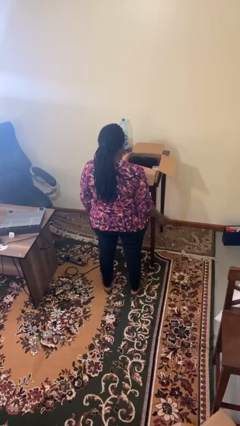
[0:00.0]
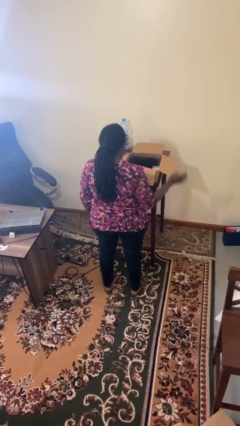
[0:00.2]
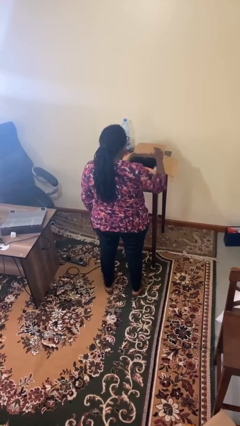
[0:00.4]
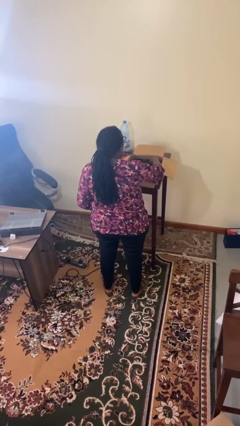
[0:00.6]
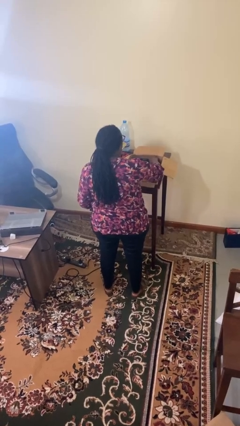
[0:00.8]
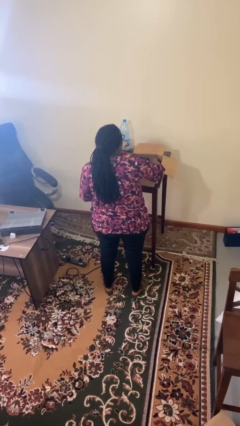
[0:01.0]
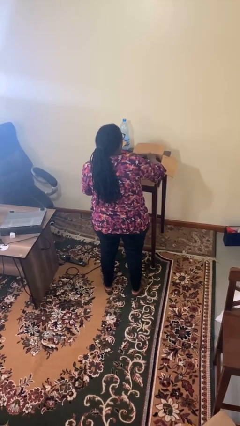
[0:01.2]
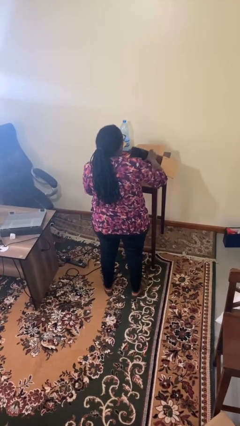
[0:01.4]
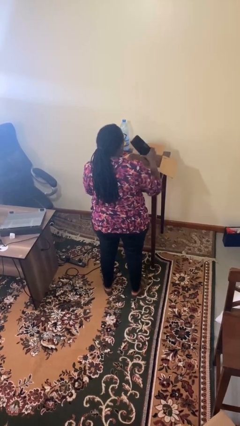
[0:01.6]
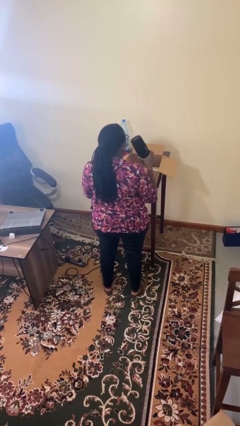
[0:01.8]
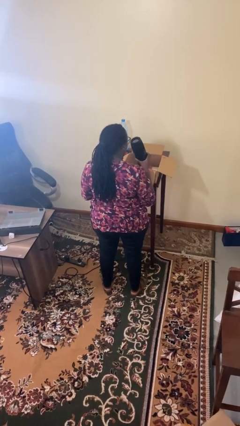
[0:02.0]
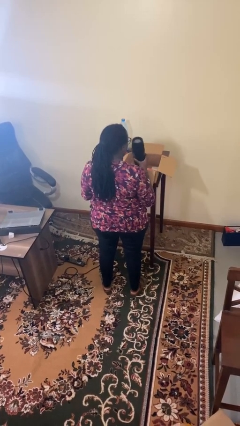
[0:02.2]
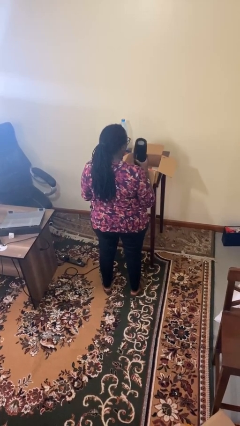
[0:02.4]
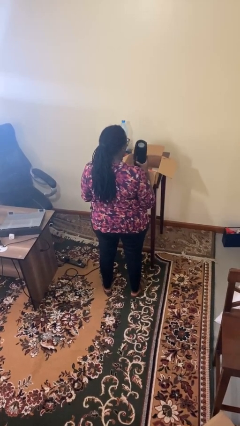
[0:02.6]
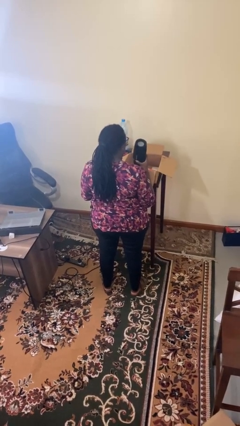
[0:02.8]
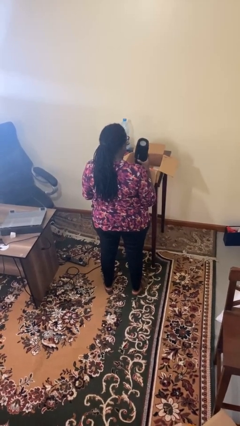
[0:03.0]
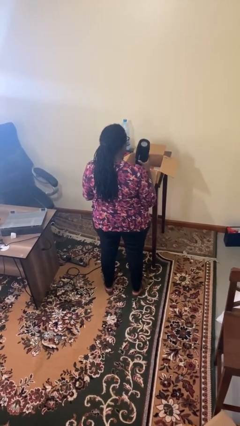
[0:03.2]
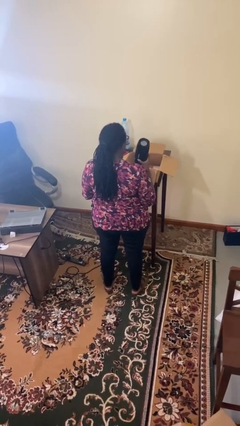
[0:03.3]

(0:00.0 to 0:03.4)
person takes object from box

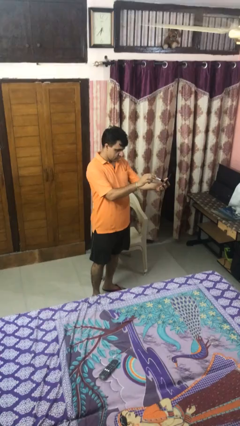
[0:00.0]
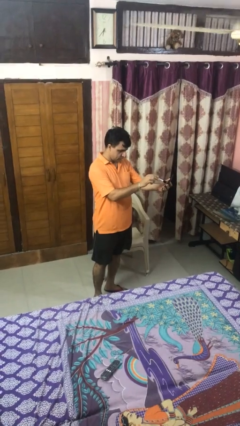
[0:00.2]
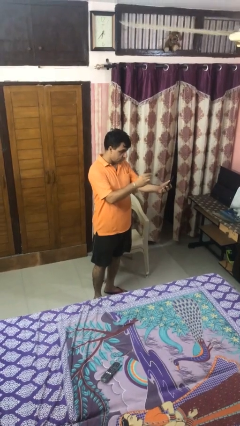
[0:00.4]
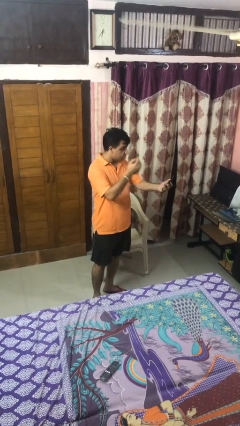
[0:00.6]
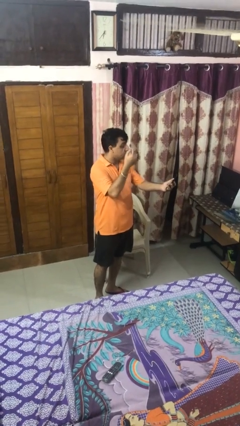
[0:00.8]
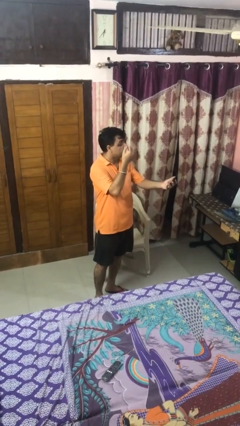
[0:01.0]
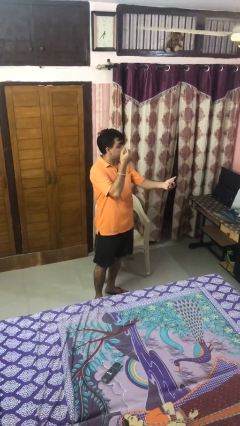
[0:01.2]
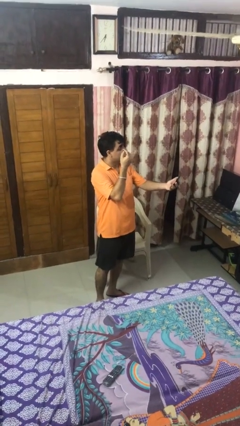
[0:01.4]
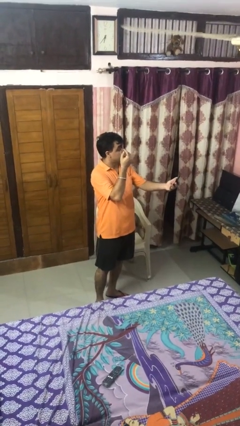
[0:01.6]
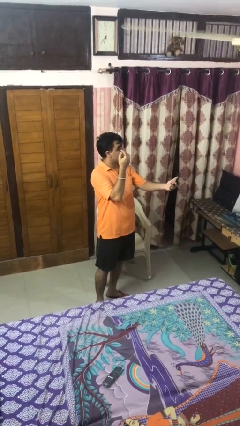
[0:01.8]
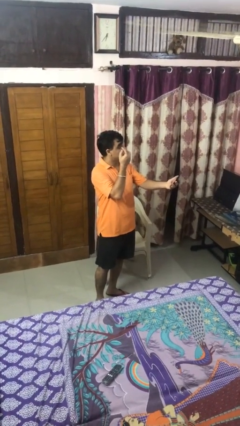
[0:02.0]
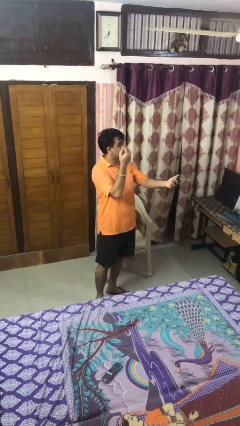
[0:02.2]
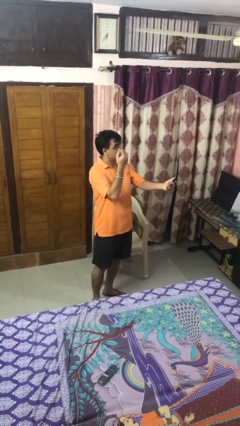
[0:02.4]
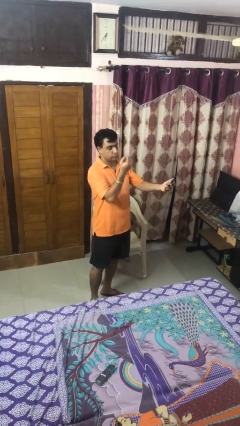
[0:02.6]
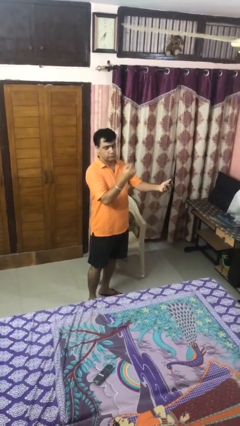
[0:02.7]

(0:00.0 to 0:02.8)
person applies eye makeup

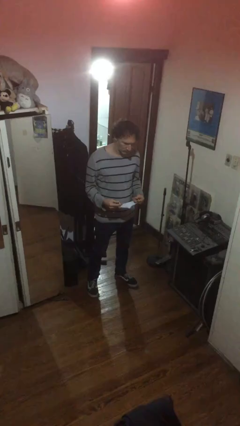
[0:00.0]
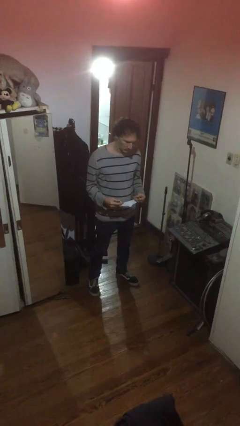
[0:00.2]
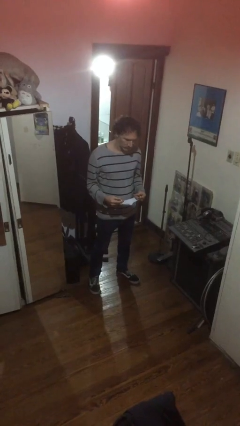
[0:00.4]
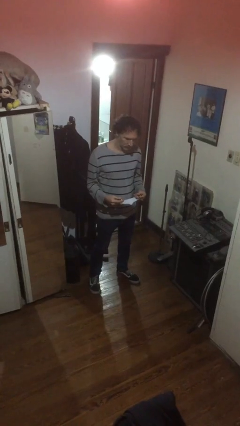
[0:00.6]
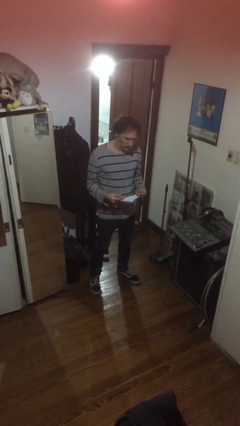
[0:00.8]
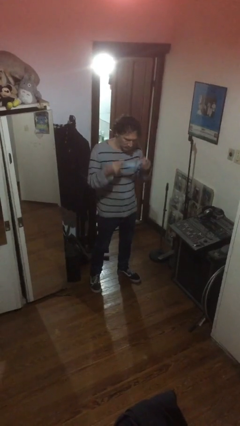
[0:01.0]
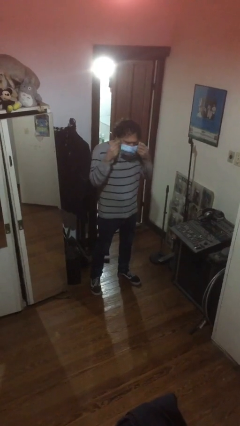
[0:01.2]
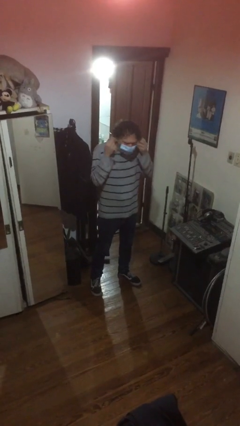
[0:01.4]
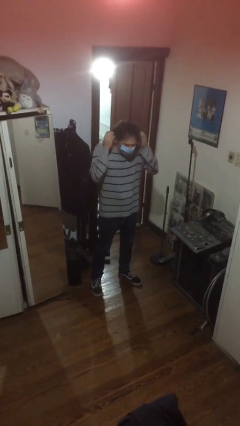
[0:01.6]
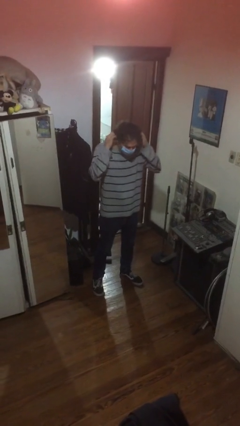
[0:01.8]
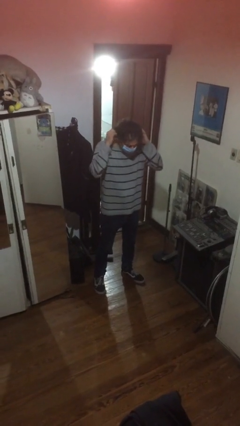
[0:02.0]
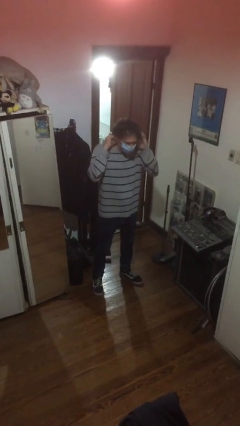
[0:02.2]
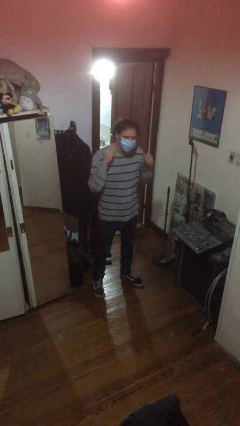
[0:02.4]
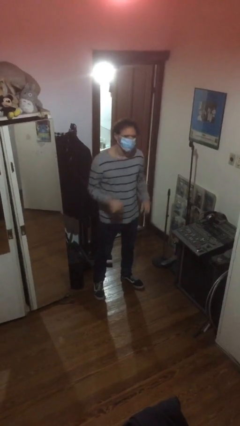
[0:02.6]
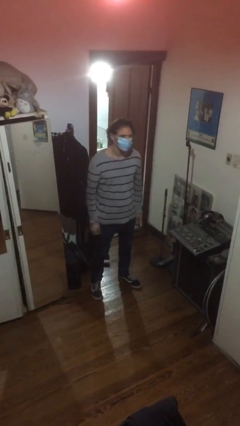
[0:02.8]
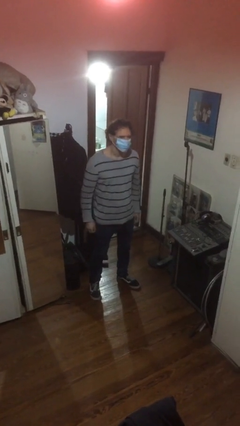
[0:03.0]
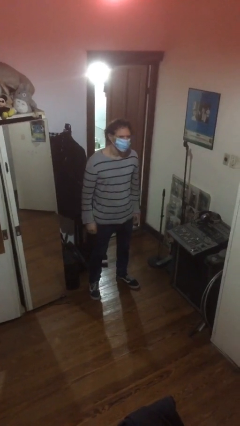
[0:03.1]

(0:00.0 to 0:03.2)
person puts on facemask

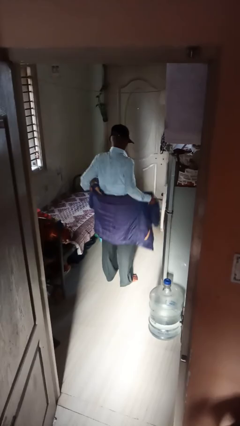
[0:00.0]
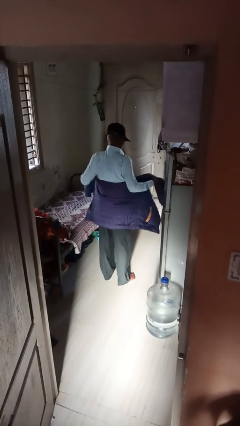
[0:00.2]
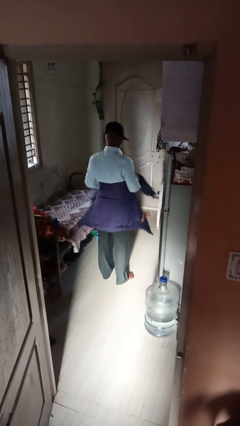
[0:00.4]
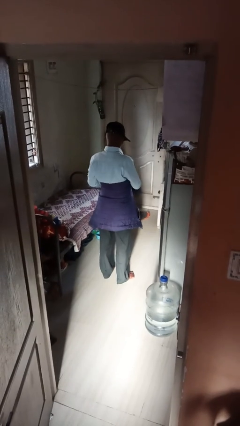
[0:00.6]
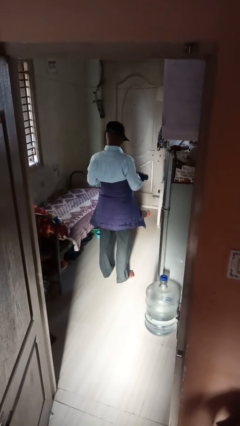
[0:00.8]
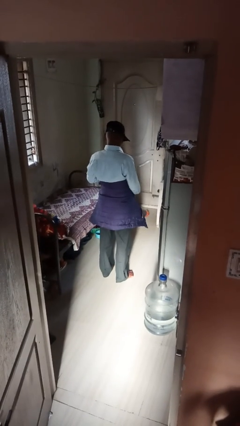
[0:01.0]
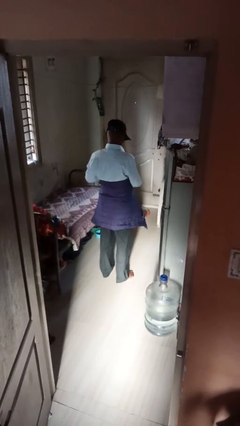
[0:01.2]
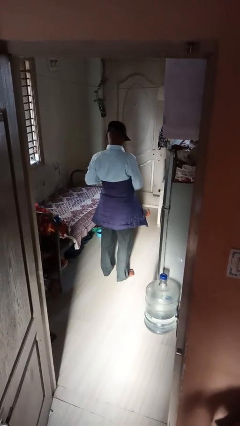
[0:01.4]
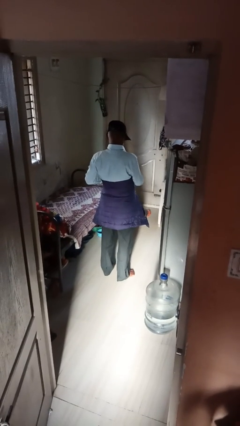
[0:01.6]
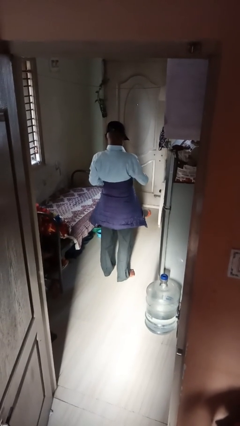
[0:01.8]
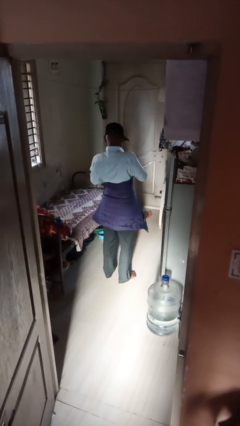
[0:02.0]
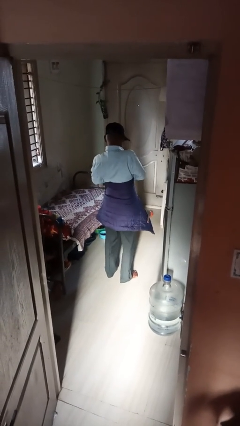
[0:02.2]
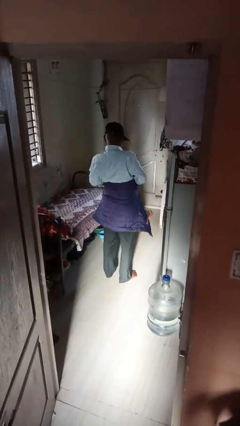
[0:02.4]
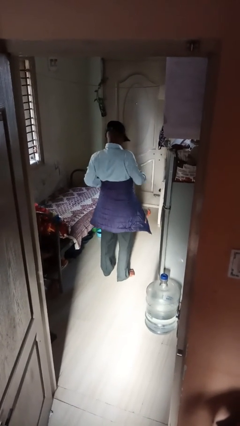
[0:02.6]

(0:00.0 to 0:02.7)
person ties jacket around waist

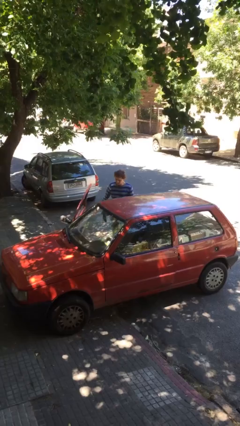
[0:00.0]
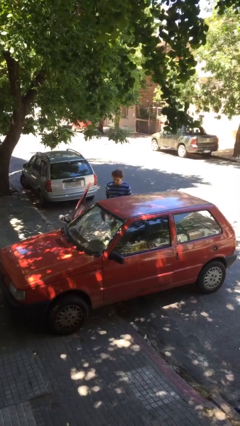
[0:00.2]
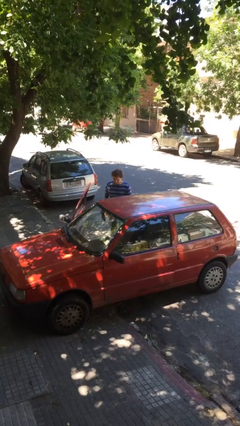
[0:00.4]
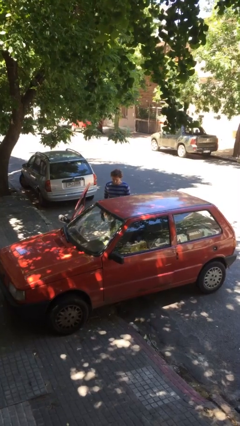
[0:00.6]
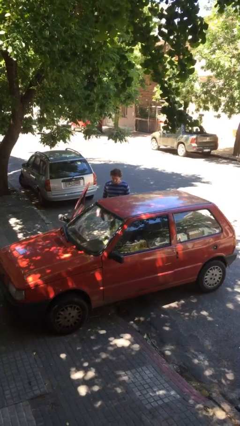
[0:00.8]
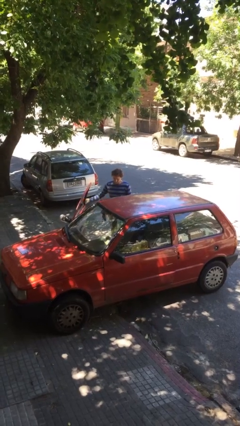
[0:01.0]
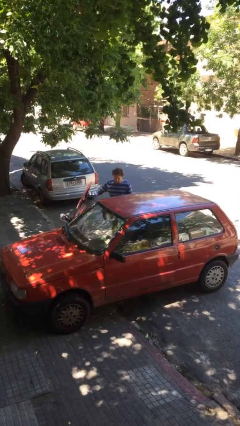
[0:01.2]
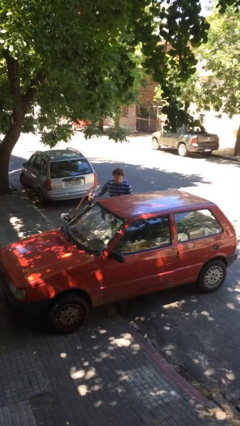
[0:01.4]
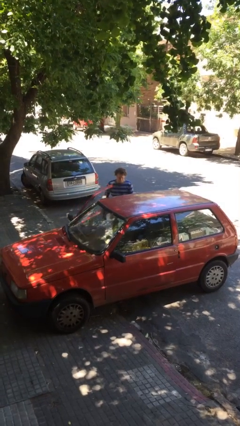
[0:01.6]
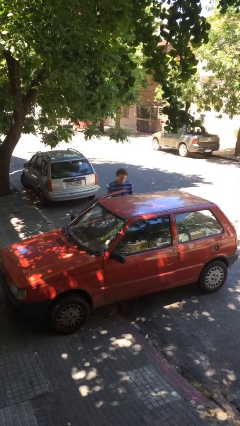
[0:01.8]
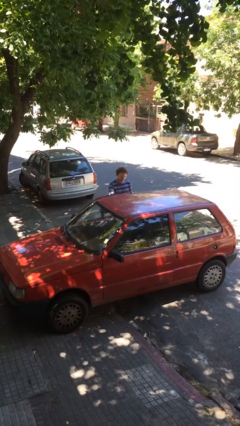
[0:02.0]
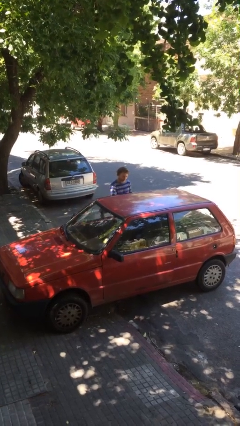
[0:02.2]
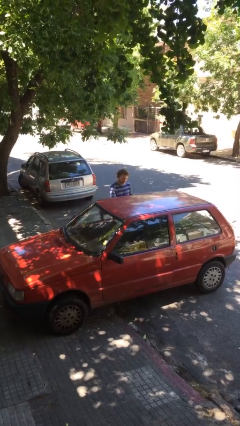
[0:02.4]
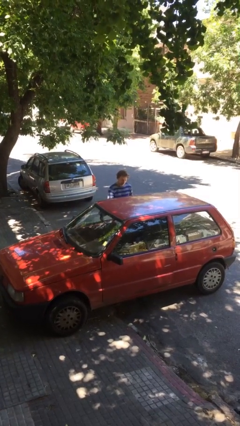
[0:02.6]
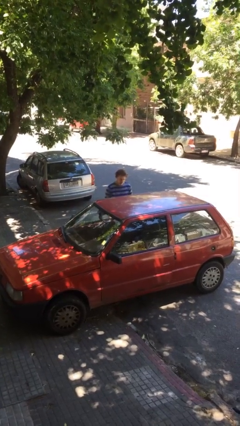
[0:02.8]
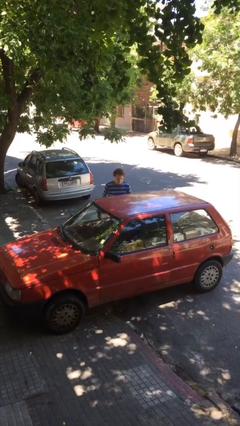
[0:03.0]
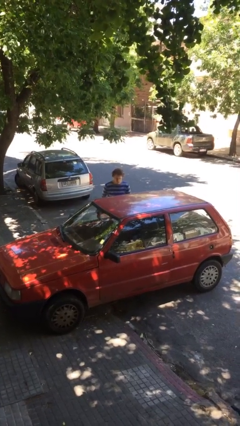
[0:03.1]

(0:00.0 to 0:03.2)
person closes car door

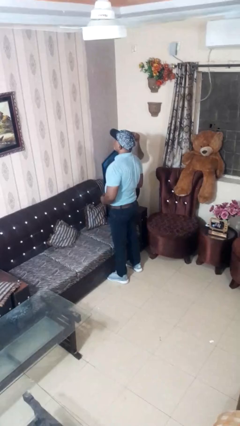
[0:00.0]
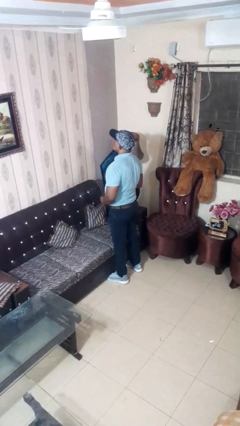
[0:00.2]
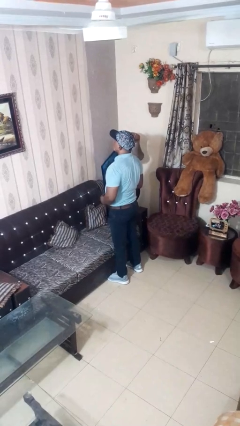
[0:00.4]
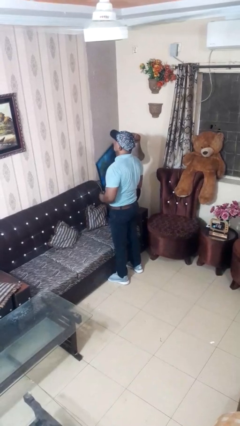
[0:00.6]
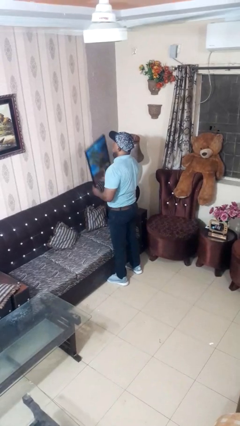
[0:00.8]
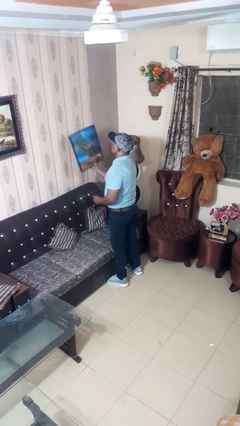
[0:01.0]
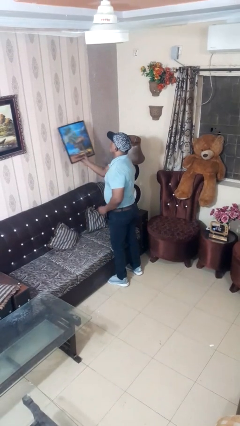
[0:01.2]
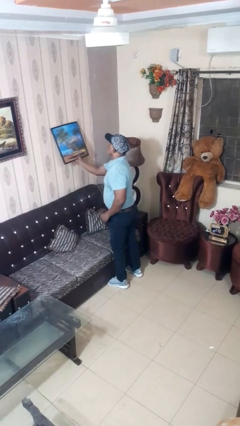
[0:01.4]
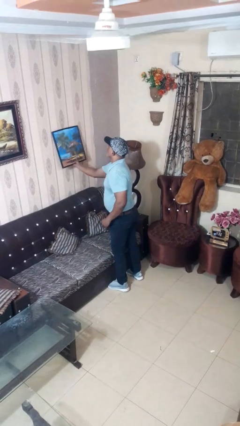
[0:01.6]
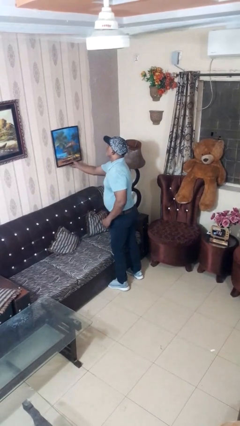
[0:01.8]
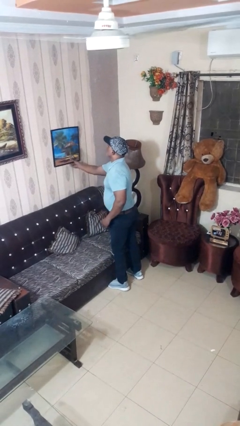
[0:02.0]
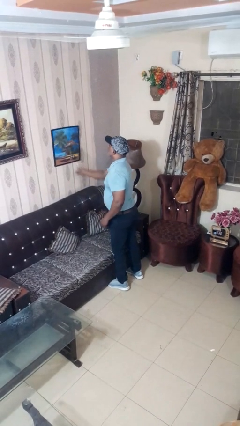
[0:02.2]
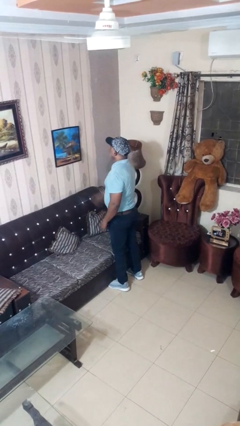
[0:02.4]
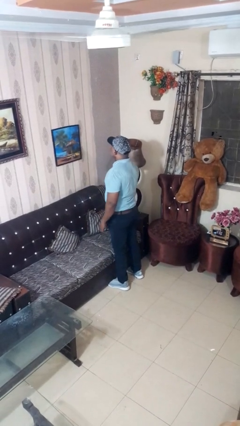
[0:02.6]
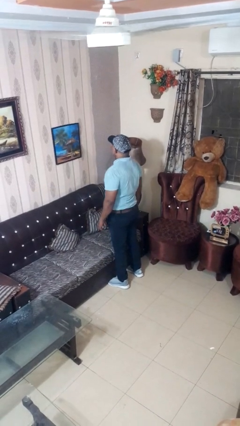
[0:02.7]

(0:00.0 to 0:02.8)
person puts up picture frame
